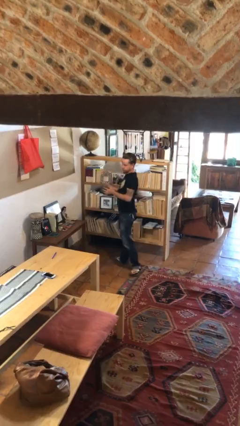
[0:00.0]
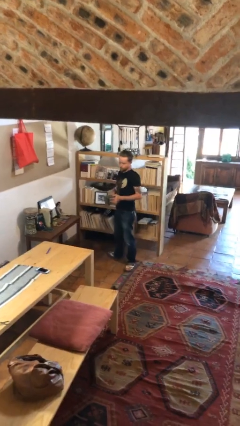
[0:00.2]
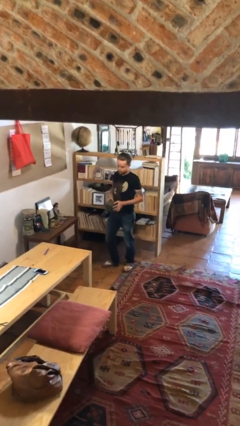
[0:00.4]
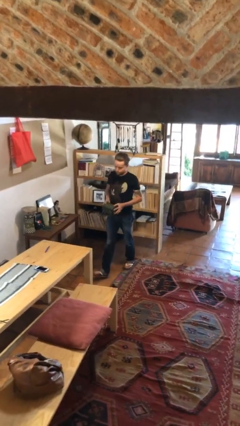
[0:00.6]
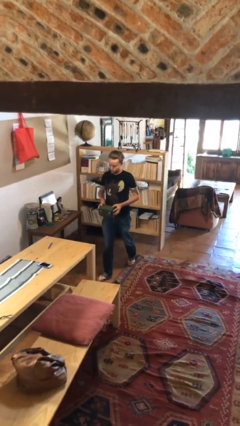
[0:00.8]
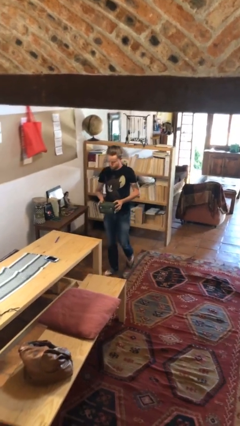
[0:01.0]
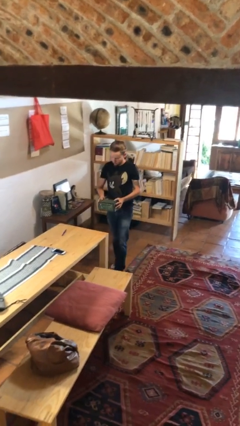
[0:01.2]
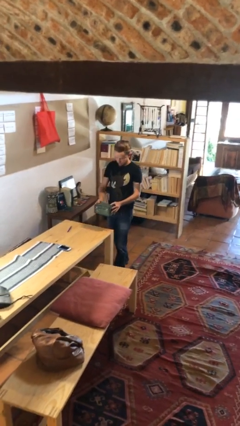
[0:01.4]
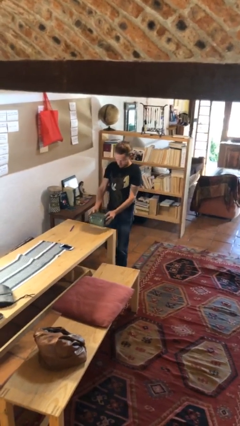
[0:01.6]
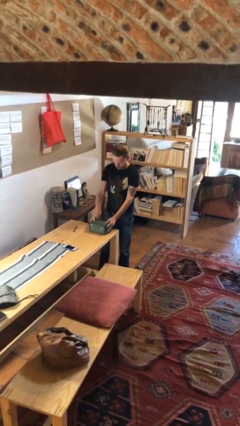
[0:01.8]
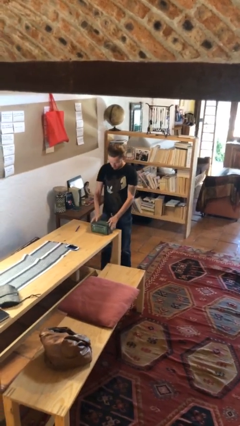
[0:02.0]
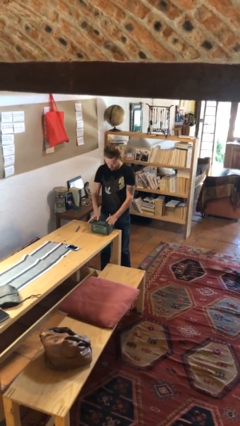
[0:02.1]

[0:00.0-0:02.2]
person puts down object on table

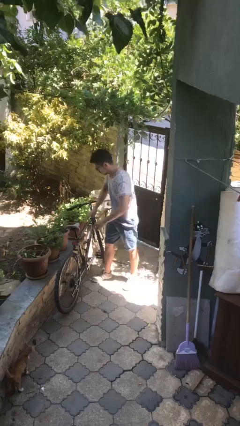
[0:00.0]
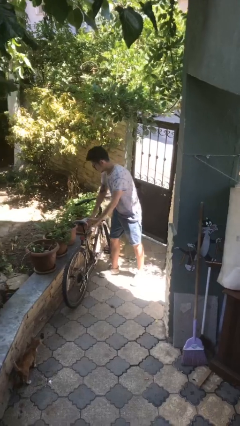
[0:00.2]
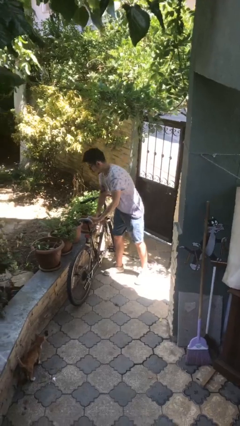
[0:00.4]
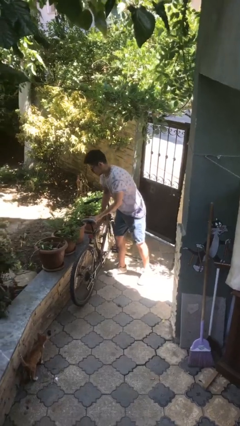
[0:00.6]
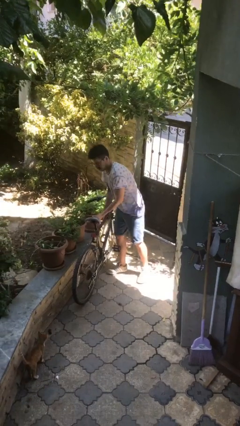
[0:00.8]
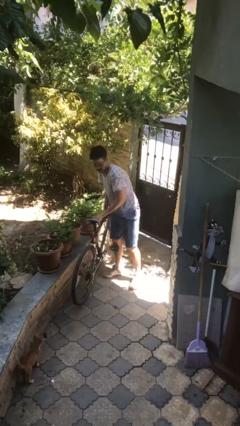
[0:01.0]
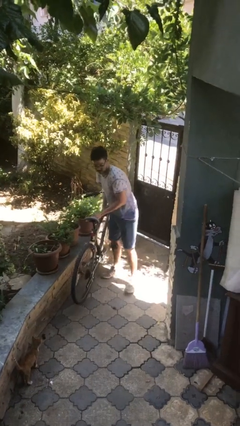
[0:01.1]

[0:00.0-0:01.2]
person picks up object from floor

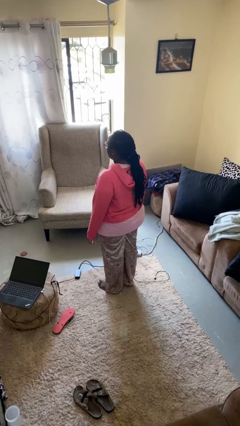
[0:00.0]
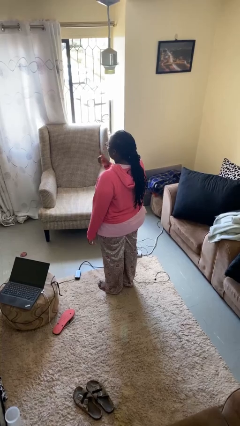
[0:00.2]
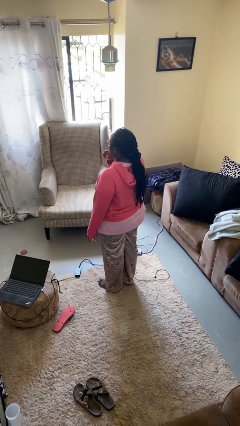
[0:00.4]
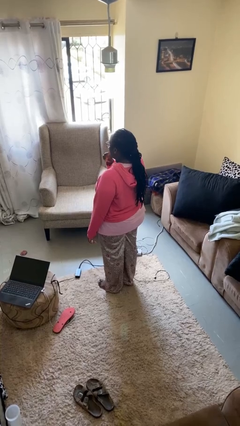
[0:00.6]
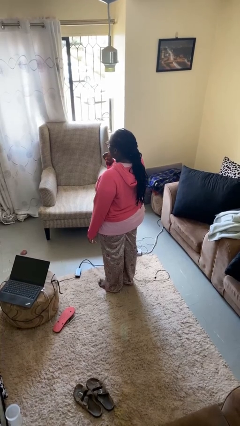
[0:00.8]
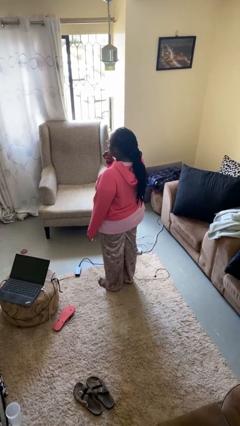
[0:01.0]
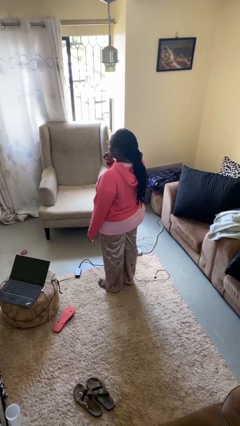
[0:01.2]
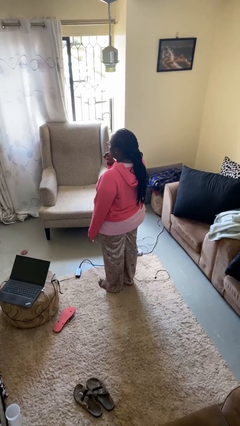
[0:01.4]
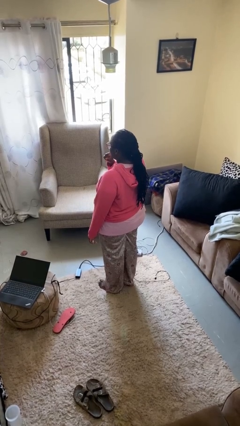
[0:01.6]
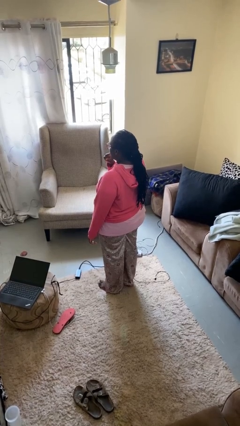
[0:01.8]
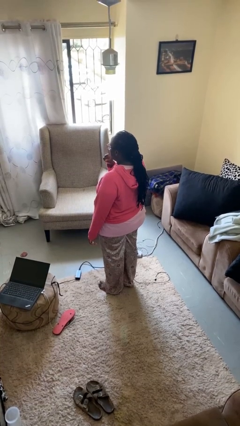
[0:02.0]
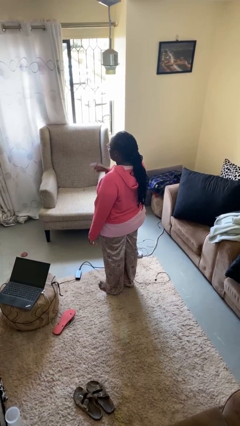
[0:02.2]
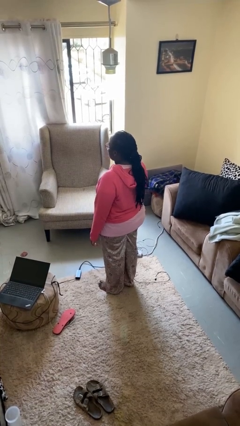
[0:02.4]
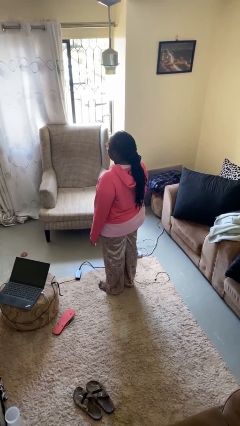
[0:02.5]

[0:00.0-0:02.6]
person gestures be quiet

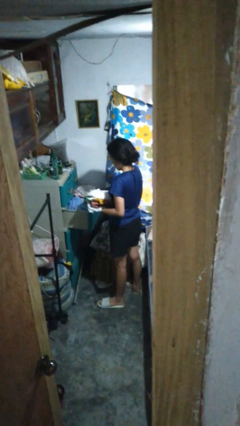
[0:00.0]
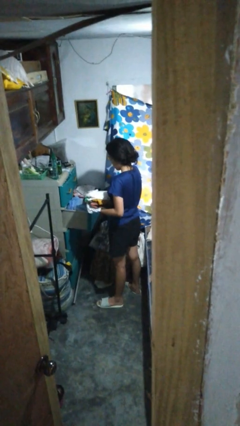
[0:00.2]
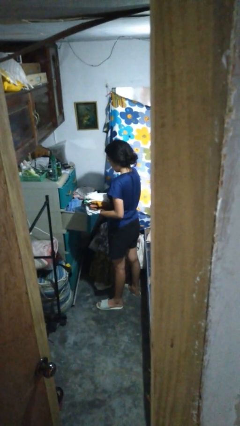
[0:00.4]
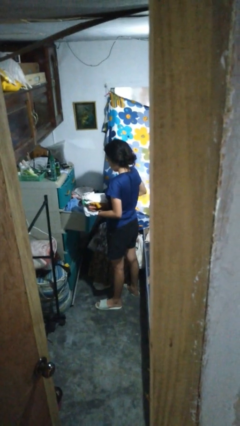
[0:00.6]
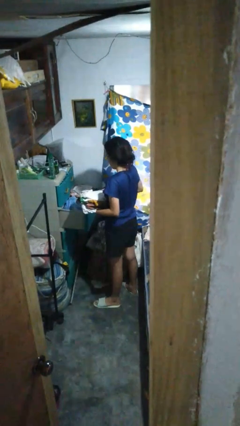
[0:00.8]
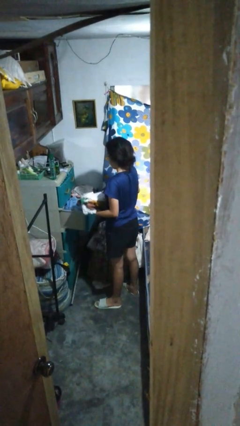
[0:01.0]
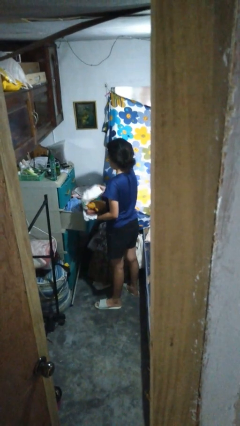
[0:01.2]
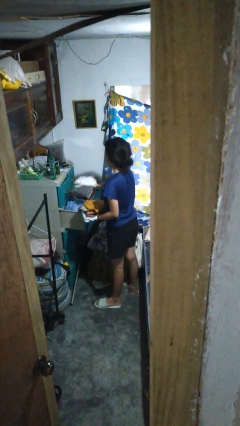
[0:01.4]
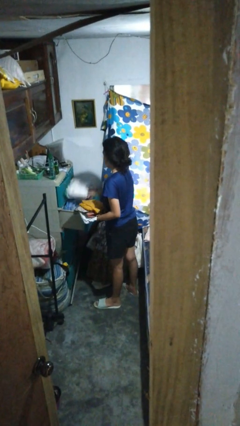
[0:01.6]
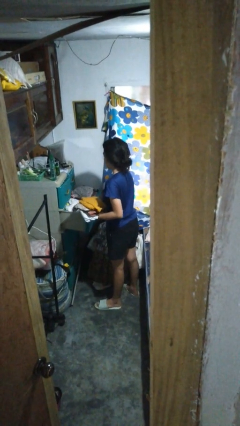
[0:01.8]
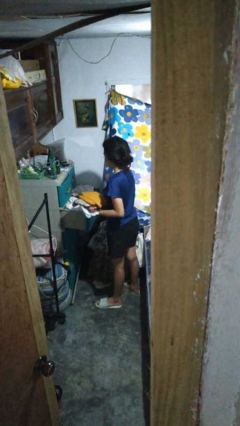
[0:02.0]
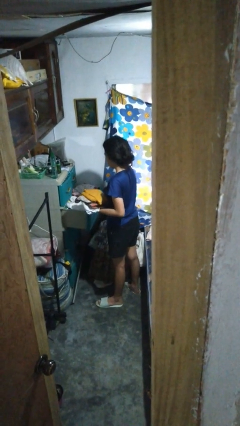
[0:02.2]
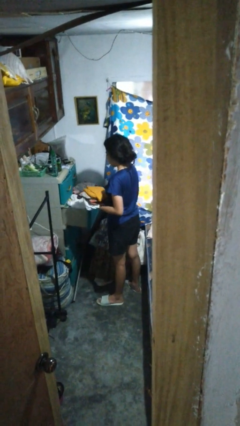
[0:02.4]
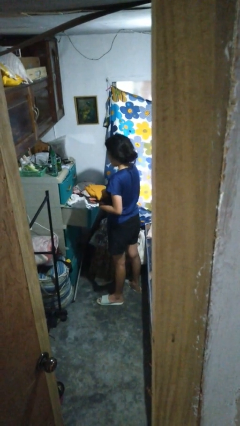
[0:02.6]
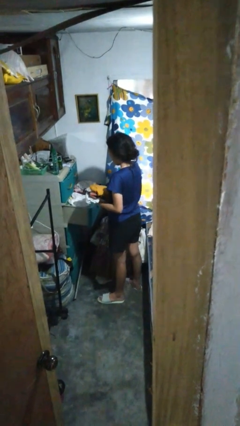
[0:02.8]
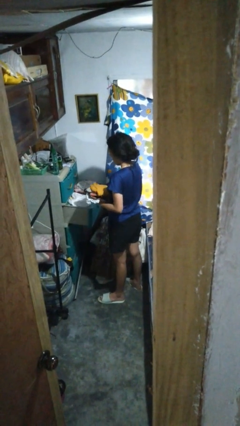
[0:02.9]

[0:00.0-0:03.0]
person puts clothes into dresser

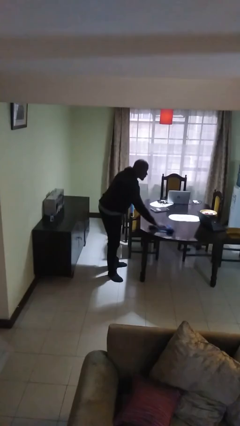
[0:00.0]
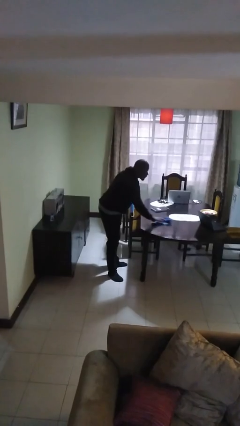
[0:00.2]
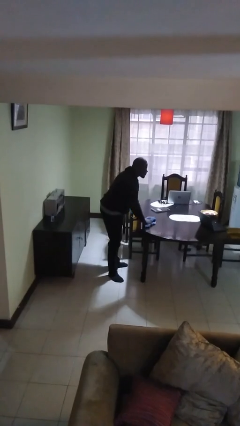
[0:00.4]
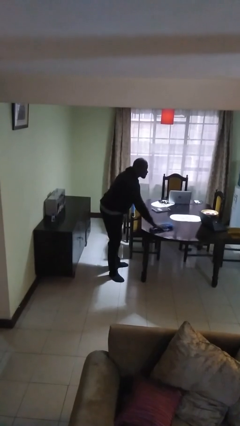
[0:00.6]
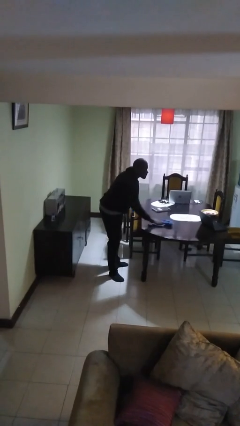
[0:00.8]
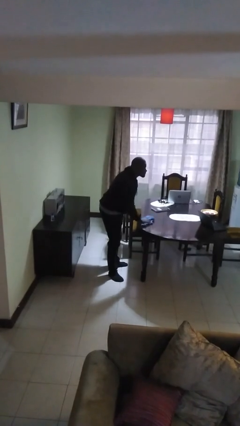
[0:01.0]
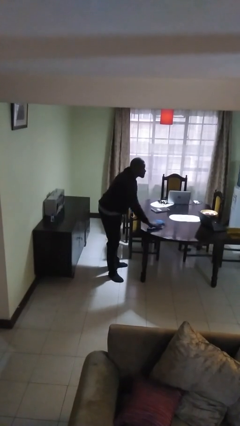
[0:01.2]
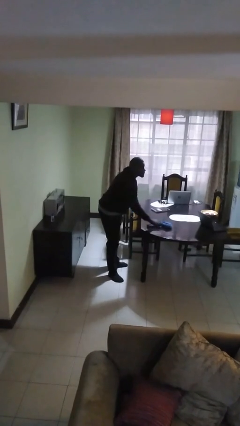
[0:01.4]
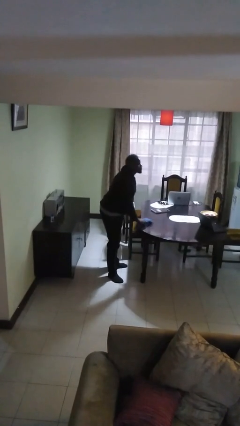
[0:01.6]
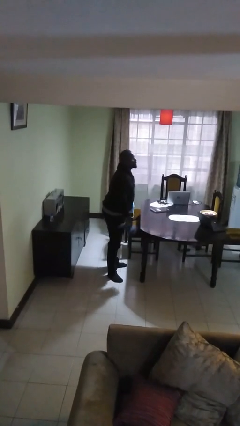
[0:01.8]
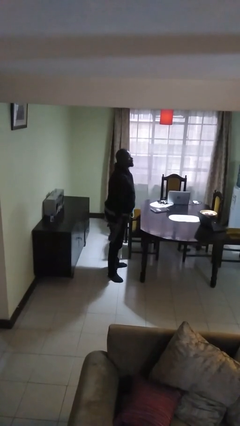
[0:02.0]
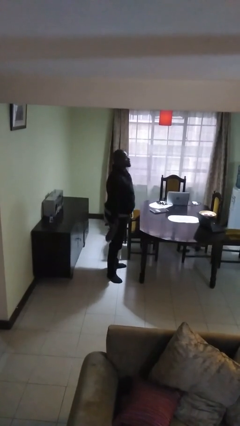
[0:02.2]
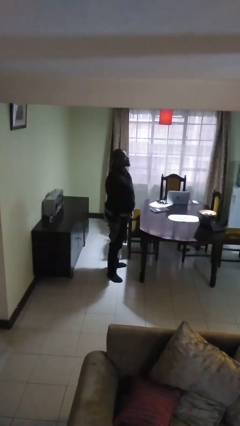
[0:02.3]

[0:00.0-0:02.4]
person cleans table with rag

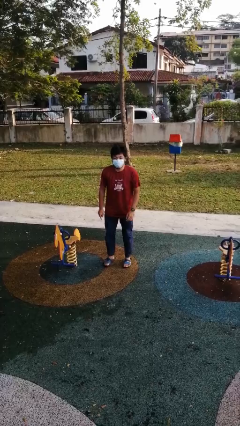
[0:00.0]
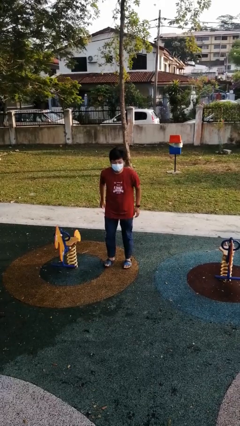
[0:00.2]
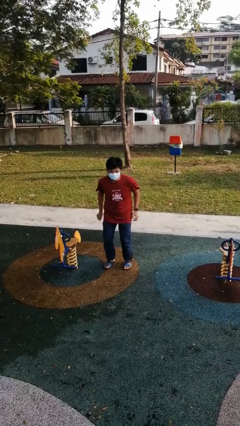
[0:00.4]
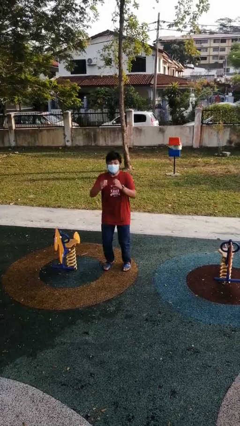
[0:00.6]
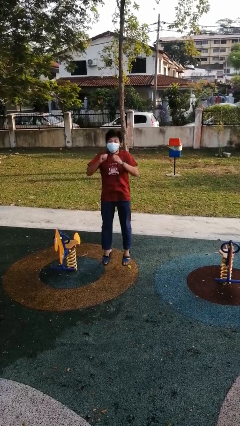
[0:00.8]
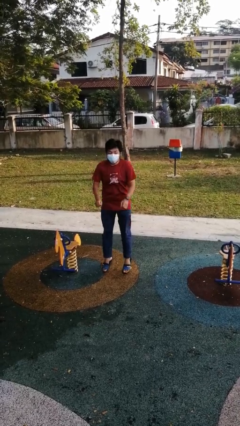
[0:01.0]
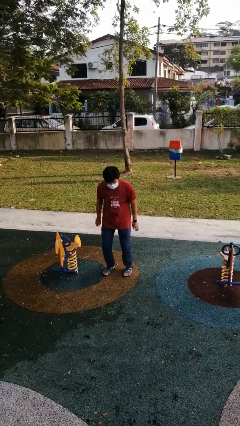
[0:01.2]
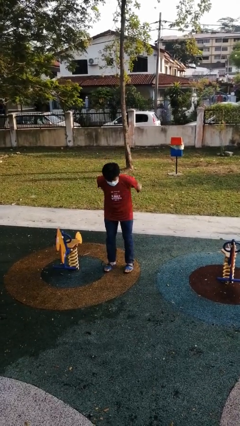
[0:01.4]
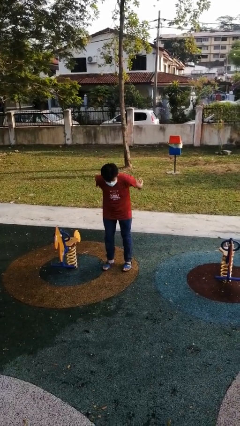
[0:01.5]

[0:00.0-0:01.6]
person jumps

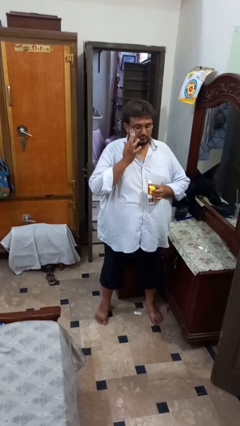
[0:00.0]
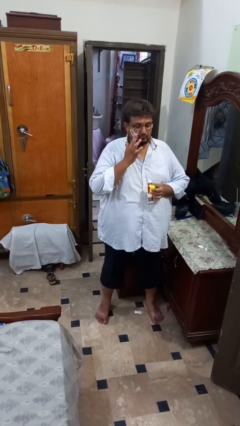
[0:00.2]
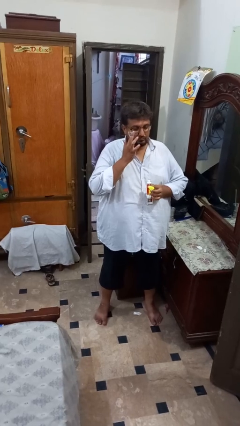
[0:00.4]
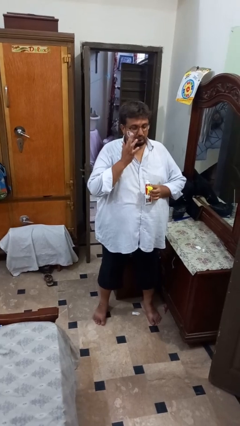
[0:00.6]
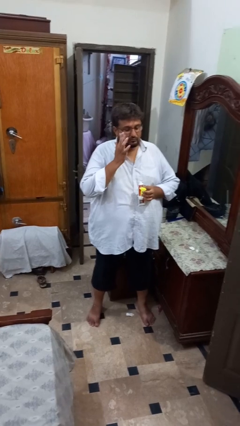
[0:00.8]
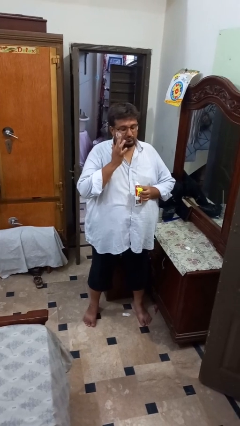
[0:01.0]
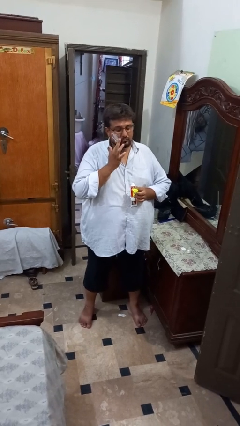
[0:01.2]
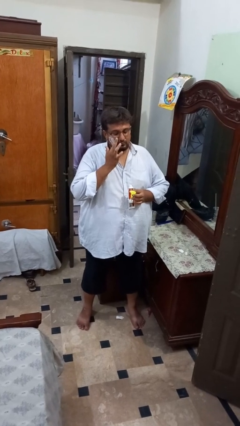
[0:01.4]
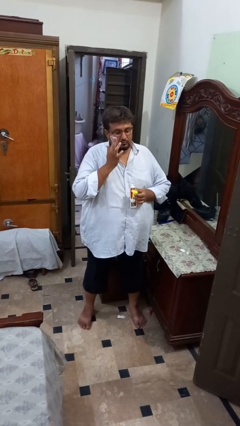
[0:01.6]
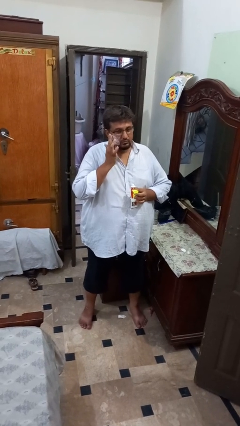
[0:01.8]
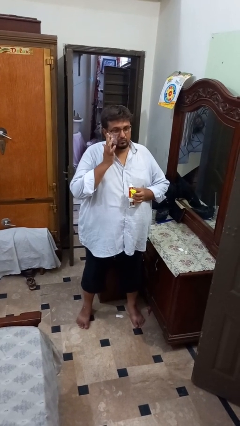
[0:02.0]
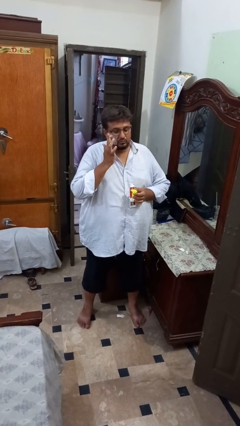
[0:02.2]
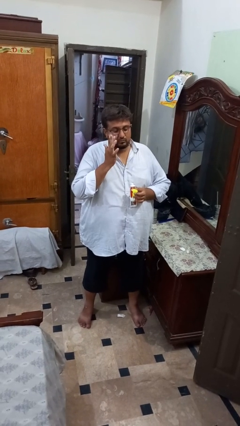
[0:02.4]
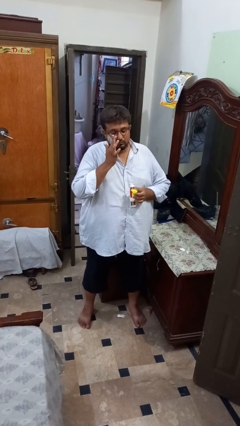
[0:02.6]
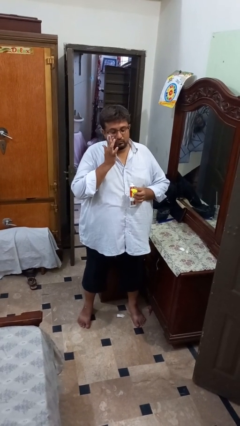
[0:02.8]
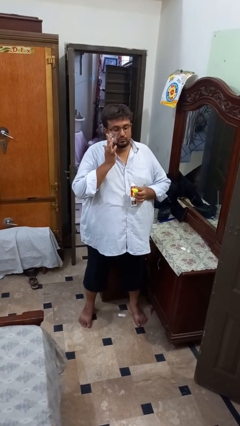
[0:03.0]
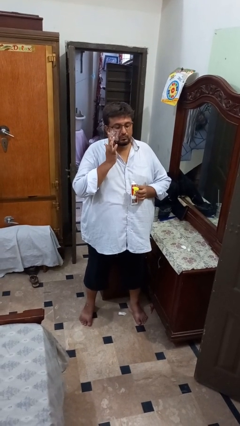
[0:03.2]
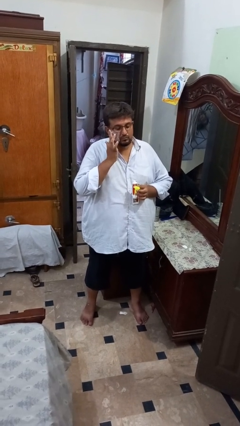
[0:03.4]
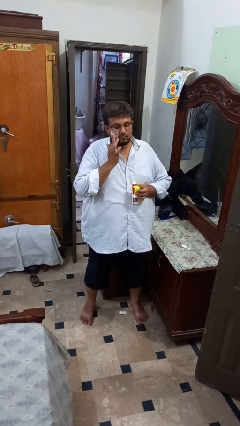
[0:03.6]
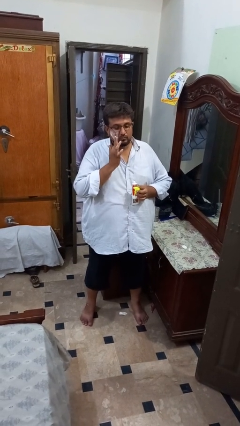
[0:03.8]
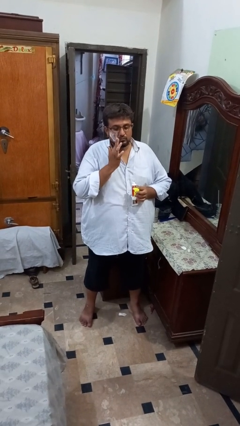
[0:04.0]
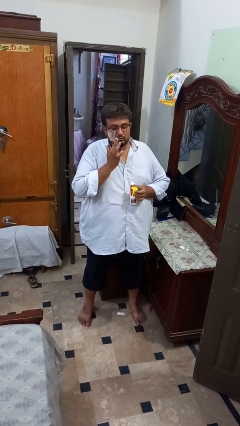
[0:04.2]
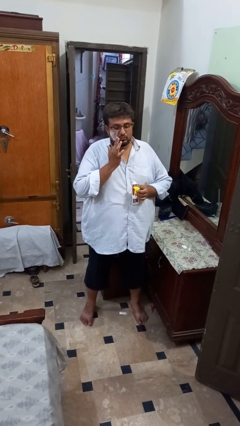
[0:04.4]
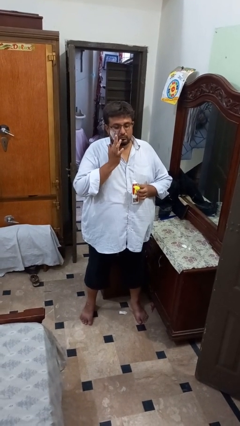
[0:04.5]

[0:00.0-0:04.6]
person applies shaving cream
